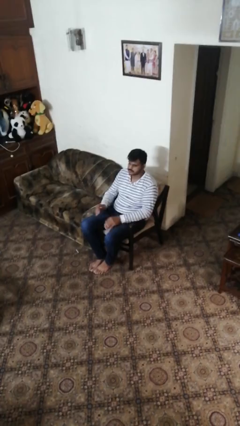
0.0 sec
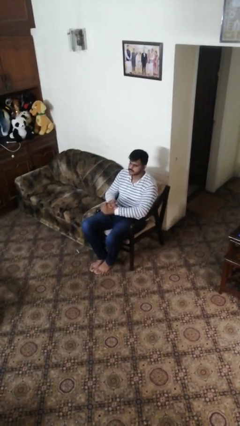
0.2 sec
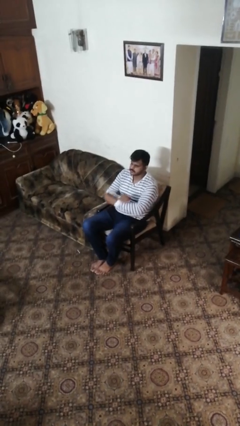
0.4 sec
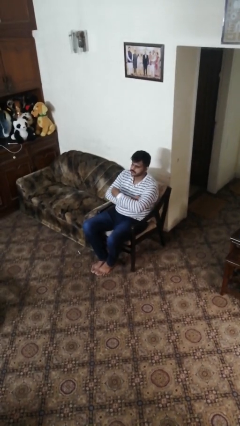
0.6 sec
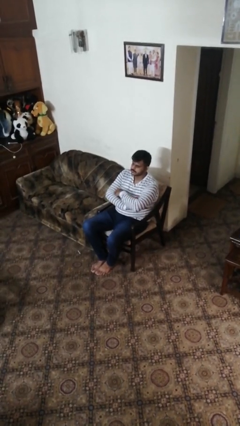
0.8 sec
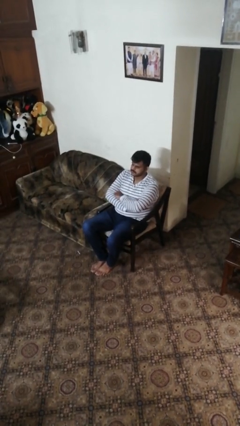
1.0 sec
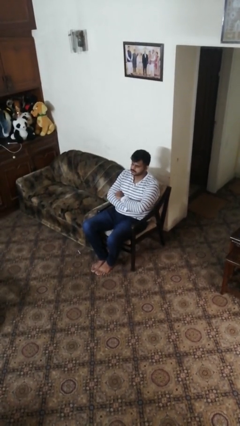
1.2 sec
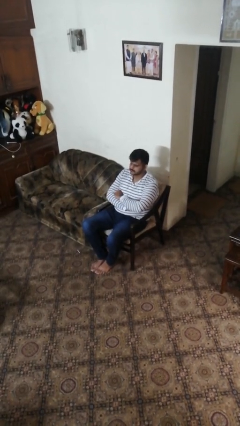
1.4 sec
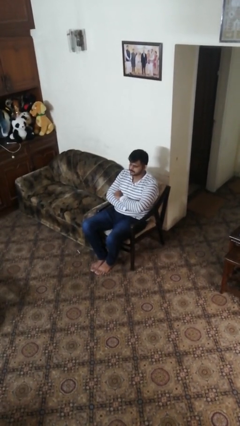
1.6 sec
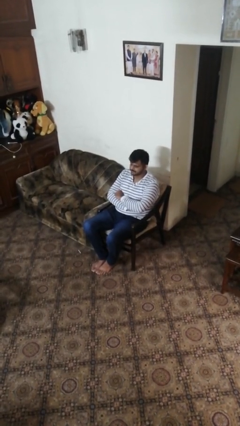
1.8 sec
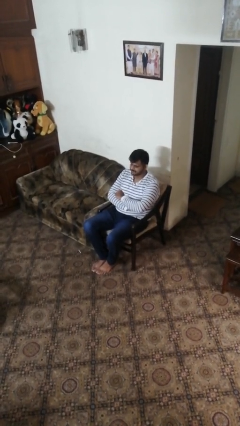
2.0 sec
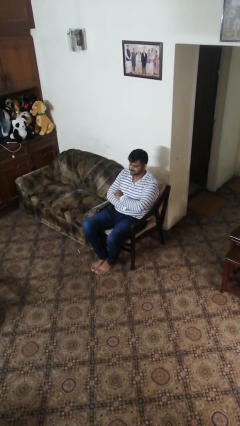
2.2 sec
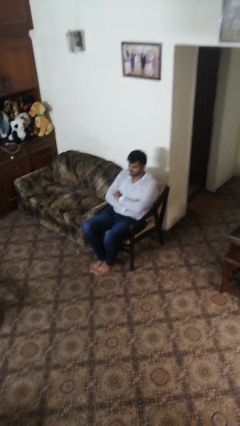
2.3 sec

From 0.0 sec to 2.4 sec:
person crosses arms

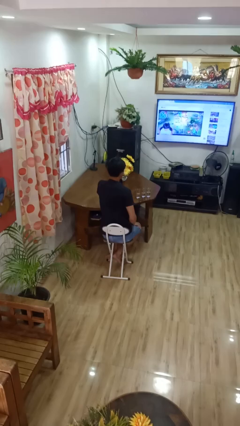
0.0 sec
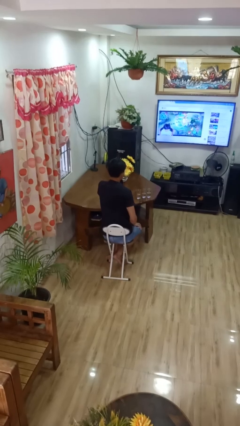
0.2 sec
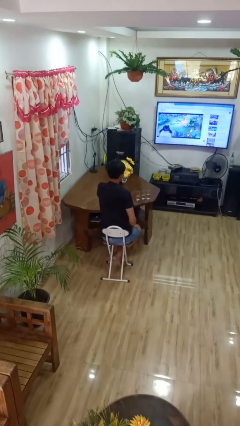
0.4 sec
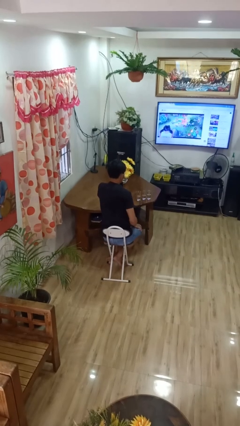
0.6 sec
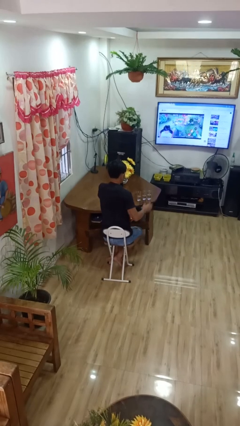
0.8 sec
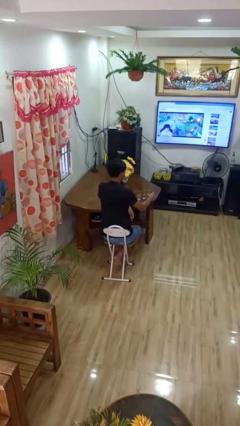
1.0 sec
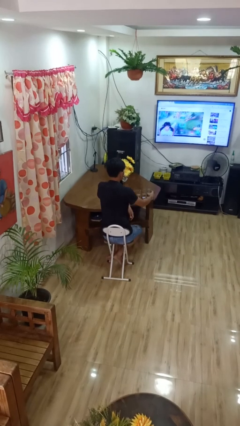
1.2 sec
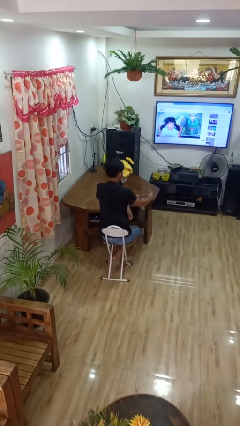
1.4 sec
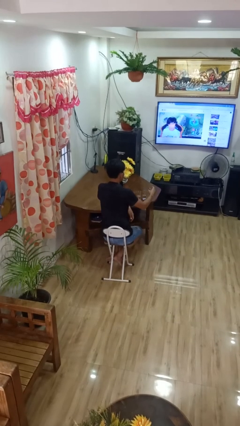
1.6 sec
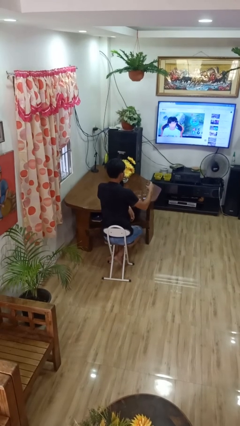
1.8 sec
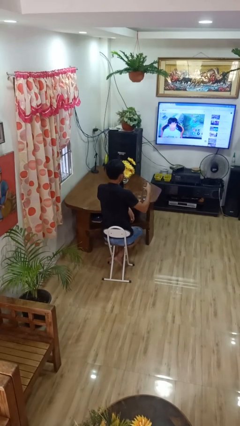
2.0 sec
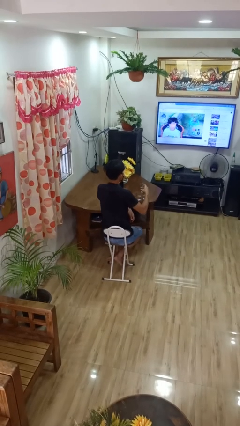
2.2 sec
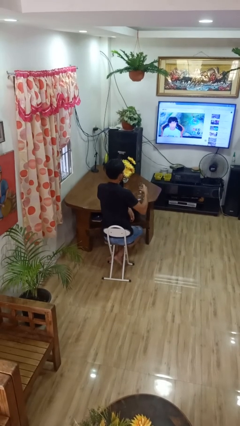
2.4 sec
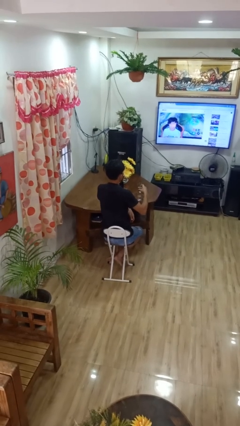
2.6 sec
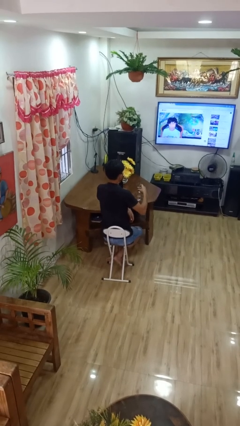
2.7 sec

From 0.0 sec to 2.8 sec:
person picks up object from table

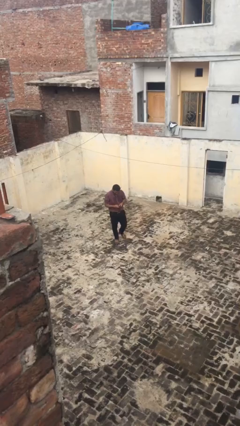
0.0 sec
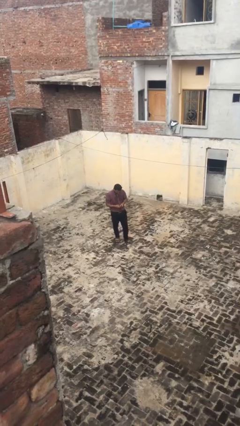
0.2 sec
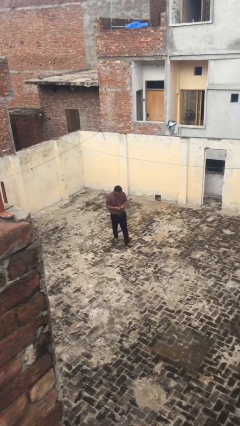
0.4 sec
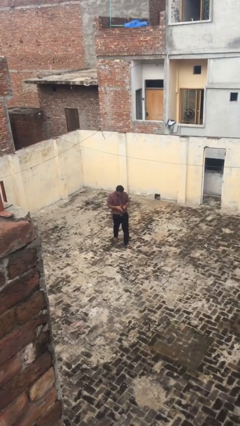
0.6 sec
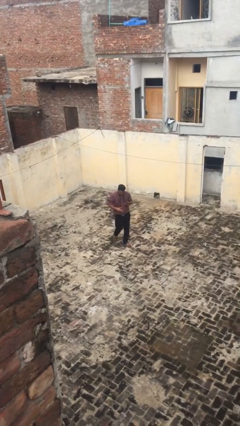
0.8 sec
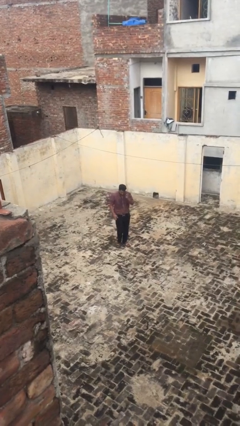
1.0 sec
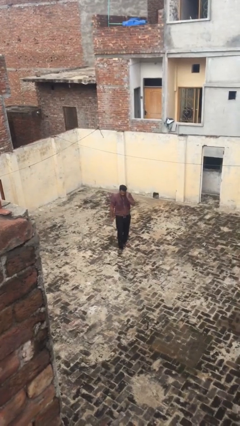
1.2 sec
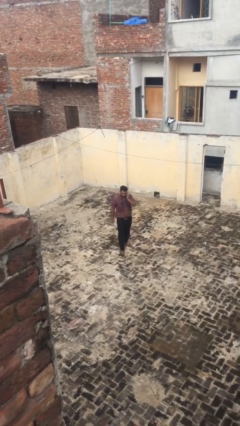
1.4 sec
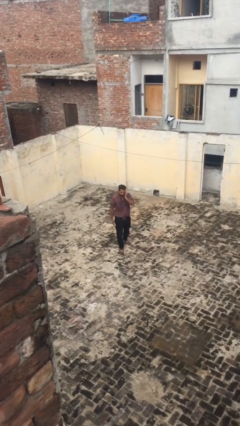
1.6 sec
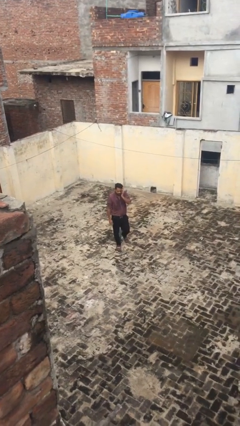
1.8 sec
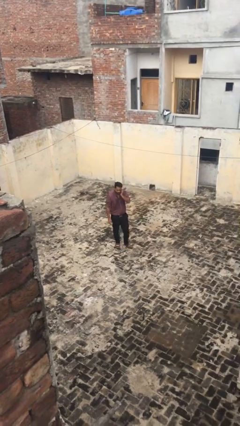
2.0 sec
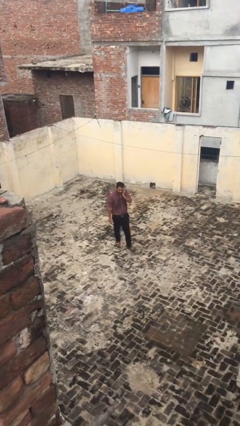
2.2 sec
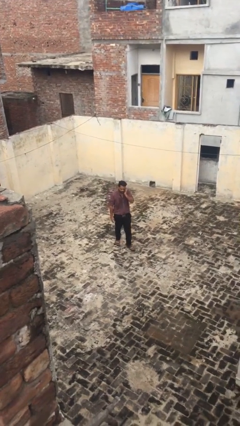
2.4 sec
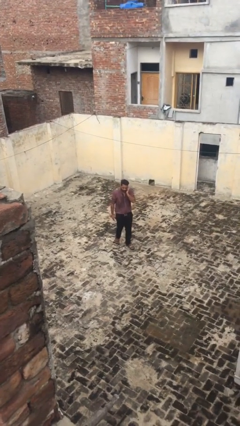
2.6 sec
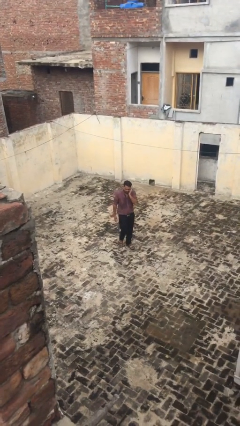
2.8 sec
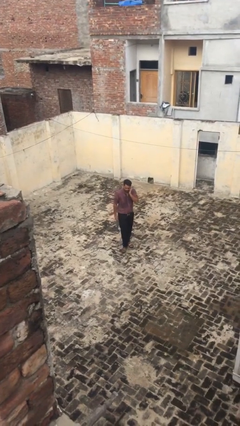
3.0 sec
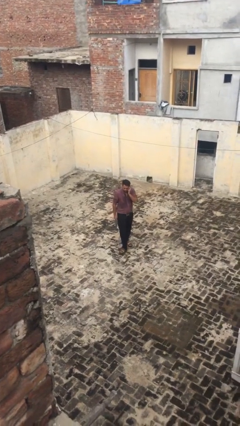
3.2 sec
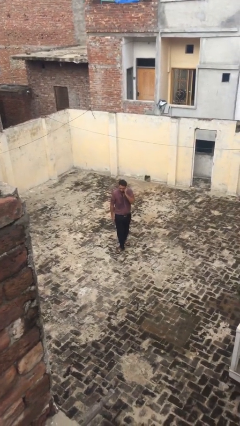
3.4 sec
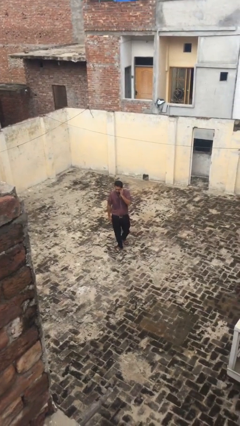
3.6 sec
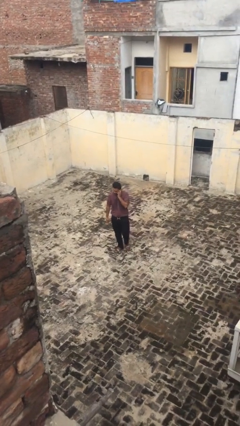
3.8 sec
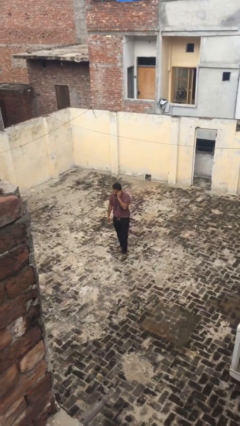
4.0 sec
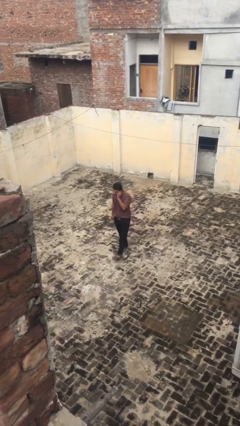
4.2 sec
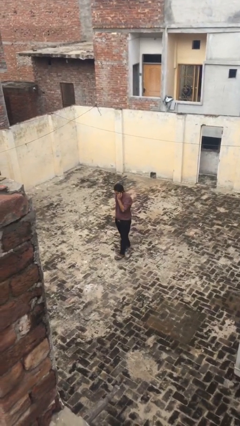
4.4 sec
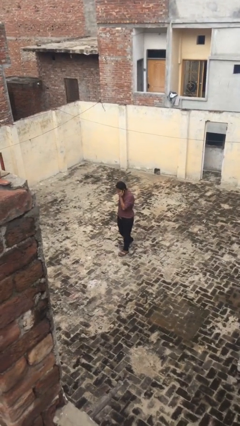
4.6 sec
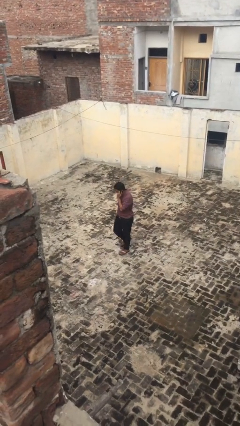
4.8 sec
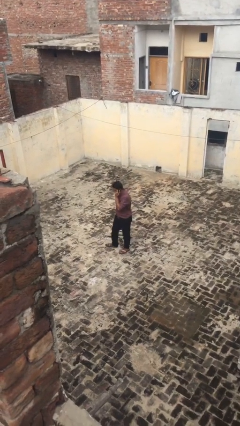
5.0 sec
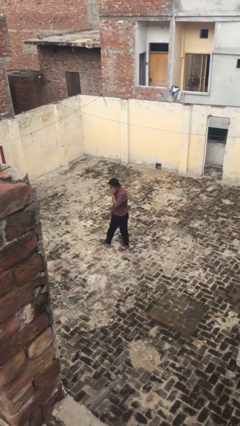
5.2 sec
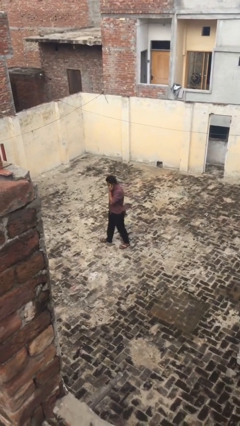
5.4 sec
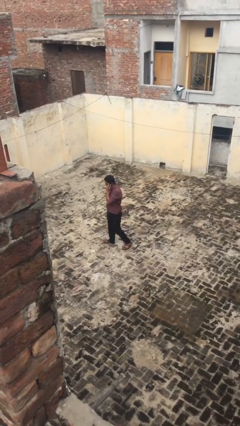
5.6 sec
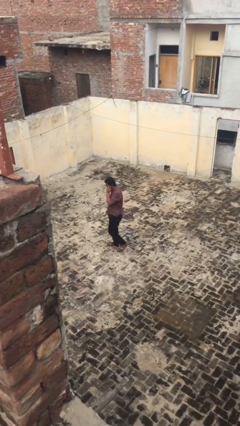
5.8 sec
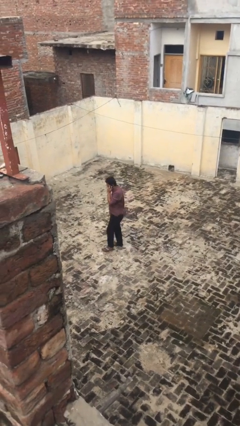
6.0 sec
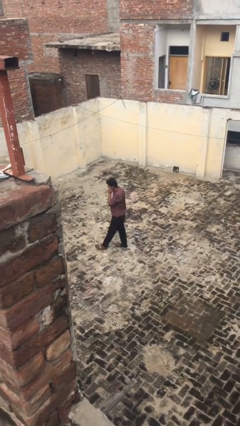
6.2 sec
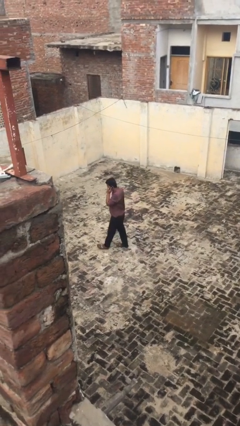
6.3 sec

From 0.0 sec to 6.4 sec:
person talks on phone

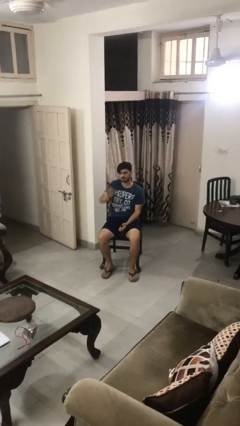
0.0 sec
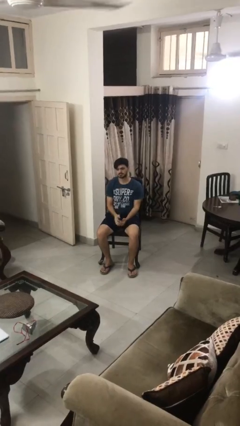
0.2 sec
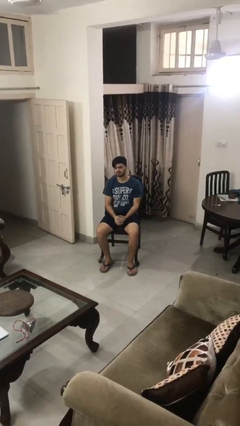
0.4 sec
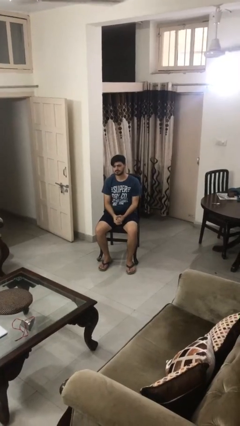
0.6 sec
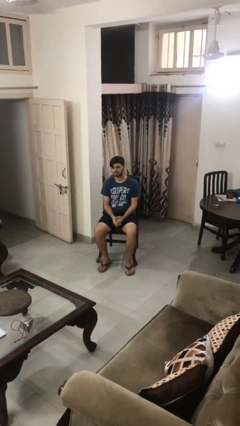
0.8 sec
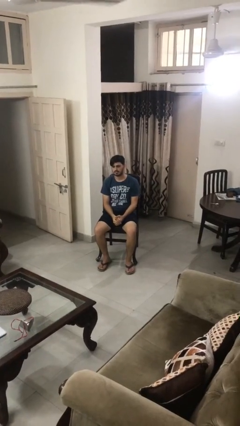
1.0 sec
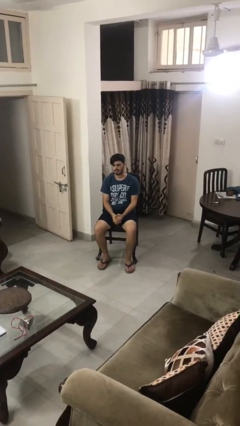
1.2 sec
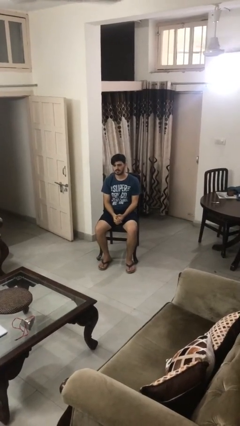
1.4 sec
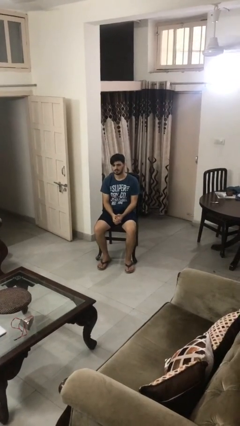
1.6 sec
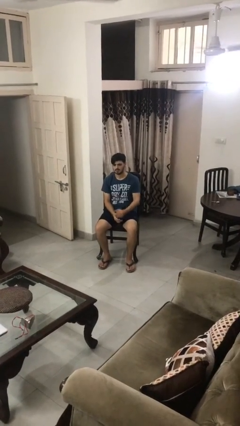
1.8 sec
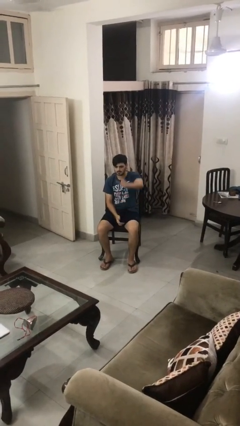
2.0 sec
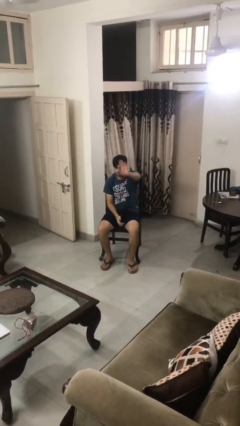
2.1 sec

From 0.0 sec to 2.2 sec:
person gestures lower hand

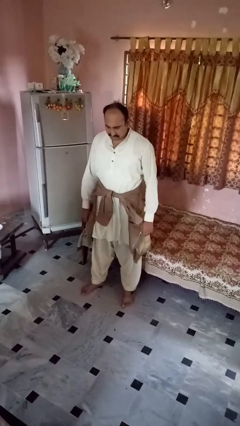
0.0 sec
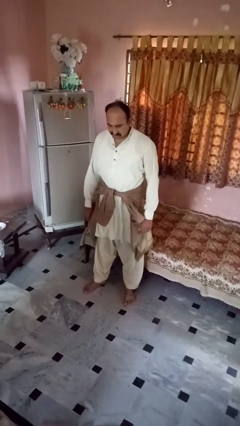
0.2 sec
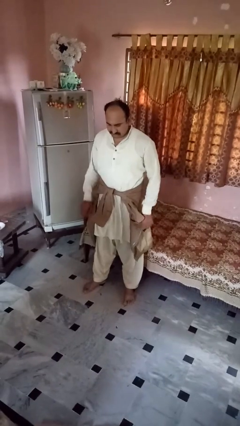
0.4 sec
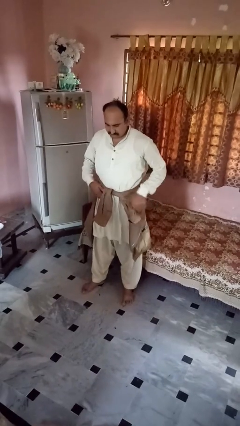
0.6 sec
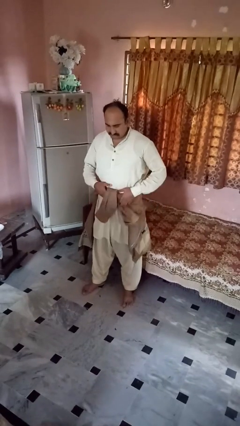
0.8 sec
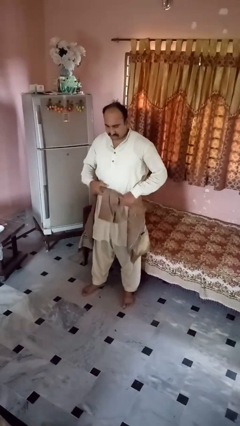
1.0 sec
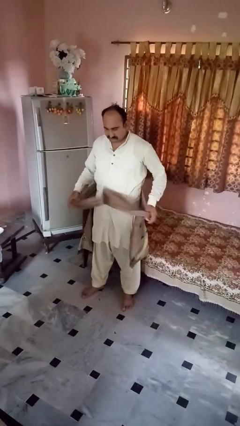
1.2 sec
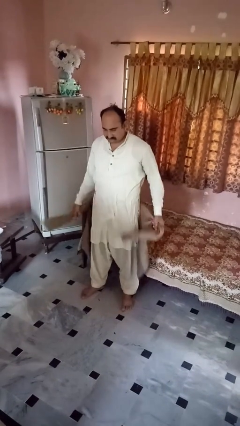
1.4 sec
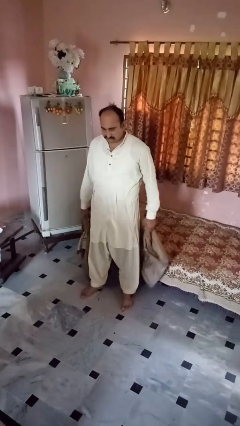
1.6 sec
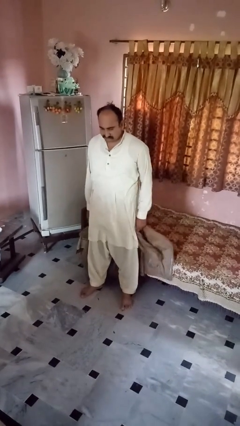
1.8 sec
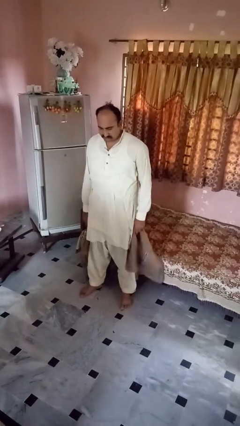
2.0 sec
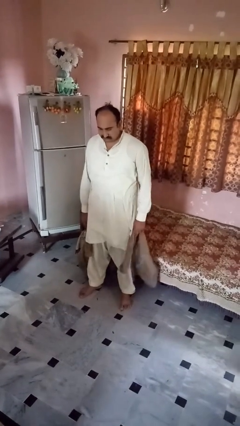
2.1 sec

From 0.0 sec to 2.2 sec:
person unties jacket around waist

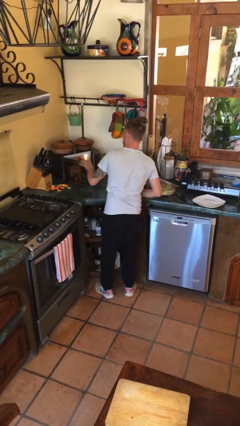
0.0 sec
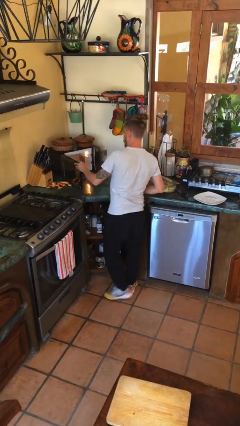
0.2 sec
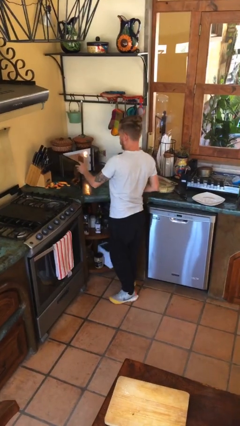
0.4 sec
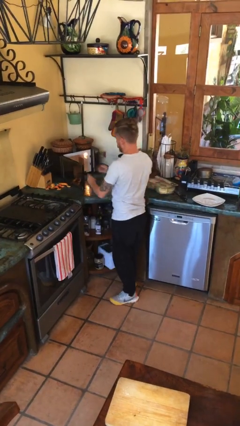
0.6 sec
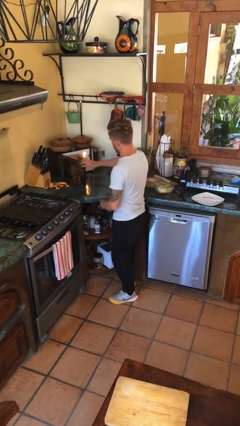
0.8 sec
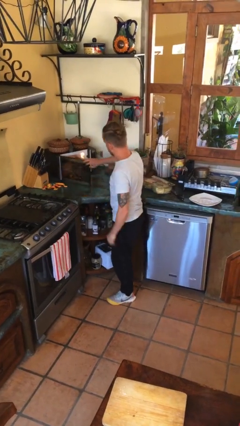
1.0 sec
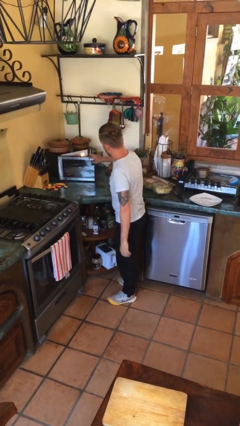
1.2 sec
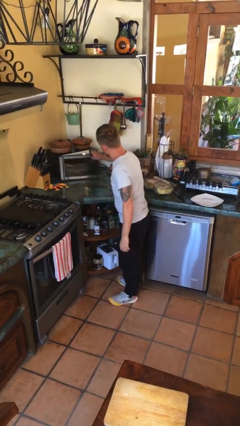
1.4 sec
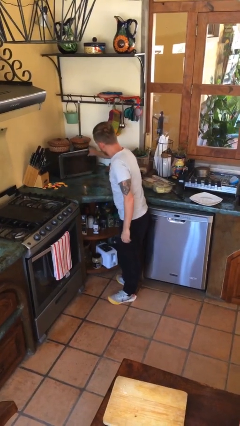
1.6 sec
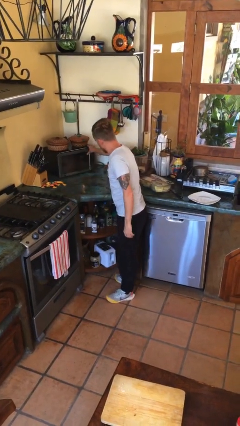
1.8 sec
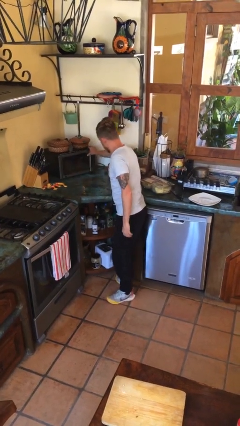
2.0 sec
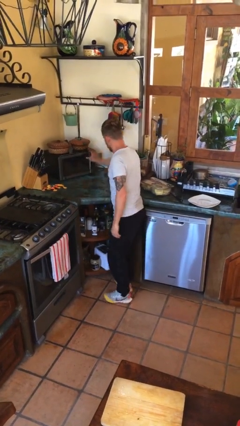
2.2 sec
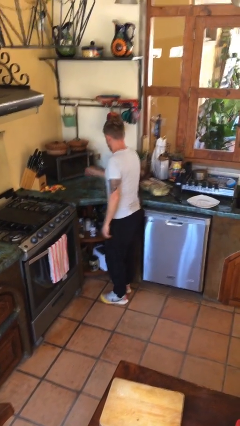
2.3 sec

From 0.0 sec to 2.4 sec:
person closes microwave
